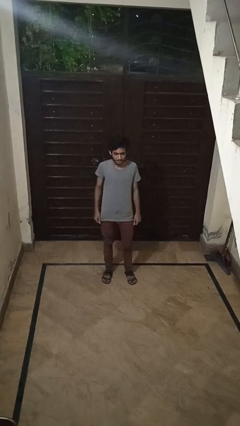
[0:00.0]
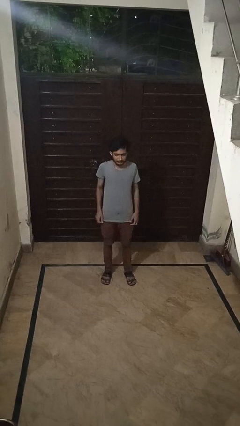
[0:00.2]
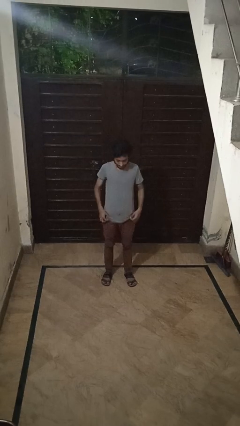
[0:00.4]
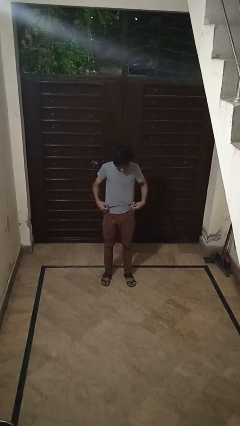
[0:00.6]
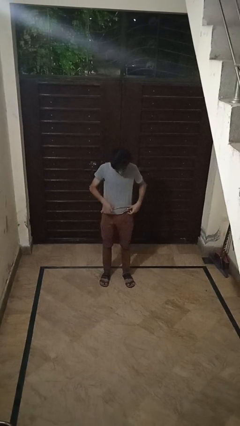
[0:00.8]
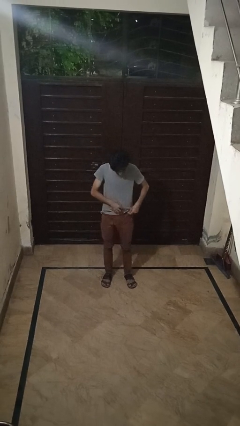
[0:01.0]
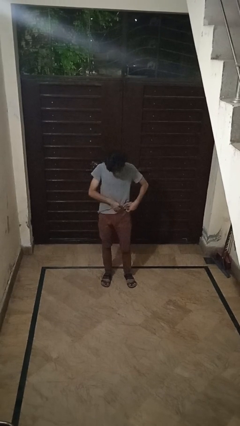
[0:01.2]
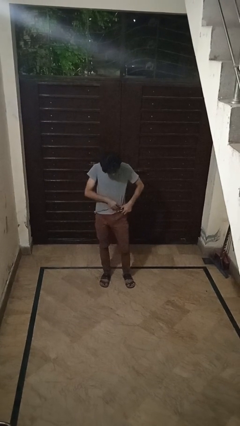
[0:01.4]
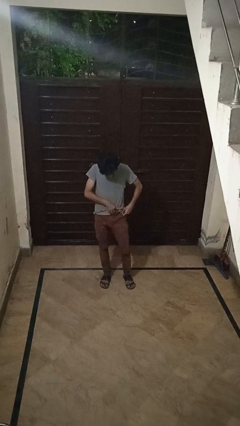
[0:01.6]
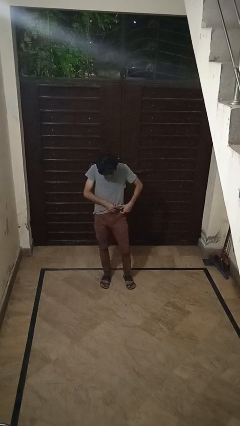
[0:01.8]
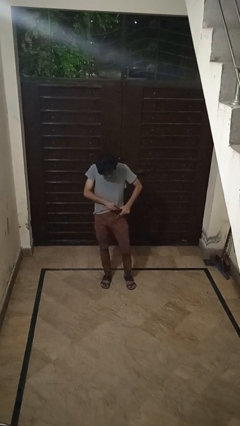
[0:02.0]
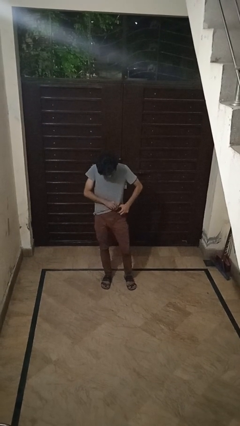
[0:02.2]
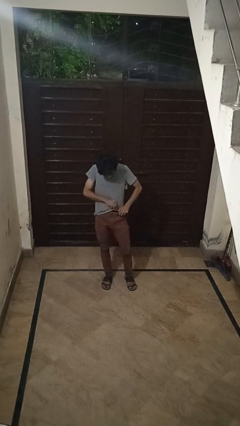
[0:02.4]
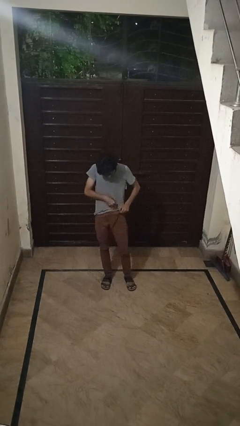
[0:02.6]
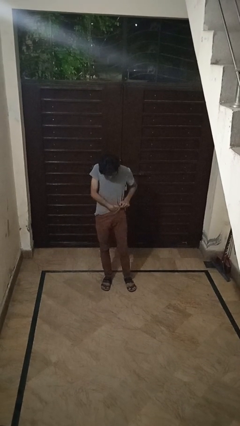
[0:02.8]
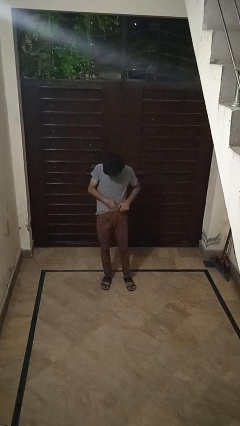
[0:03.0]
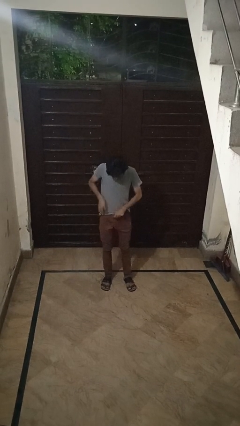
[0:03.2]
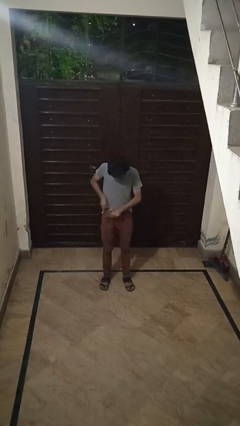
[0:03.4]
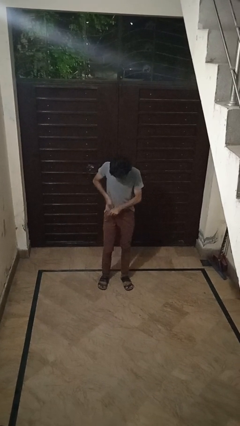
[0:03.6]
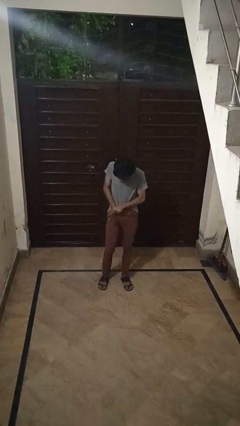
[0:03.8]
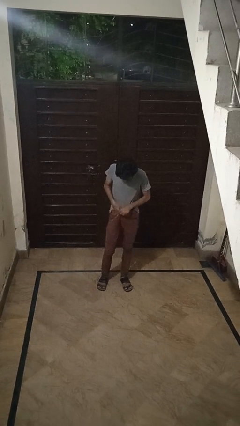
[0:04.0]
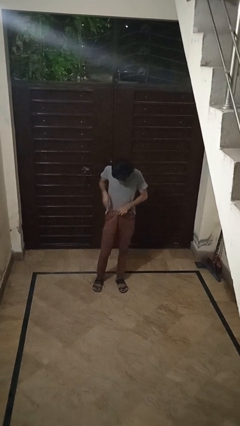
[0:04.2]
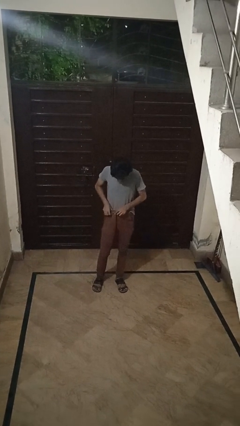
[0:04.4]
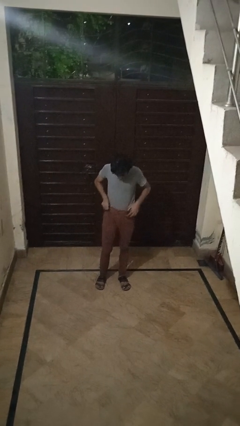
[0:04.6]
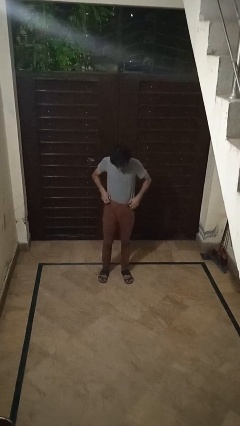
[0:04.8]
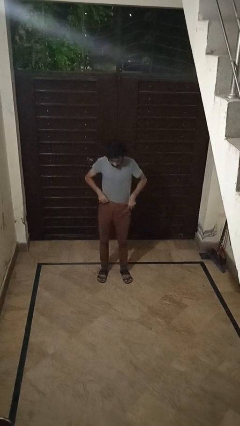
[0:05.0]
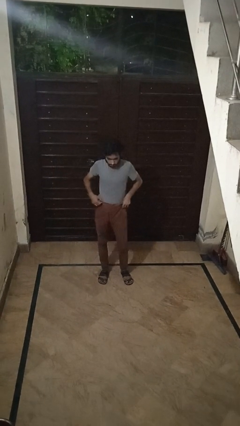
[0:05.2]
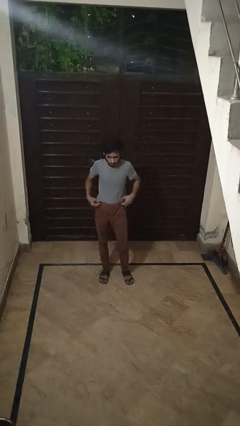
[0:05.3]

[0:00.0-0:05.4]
person tucks in shirt

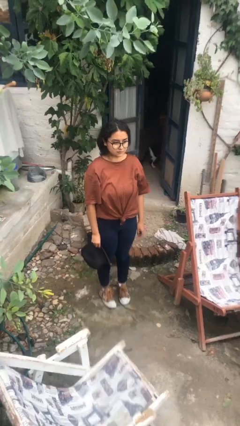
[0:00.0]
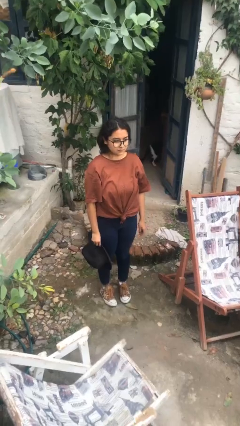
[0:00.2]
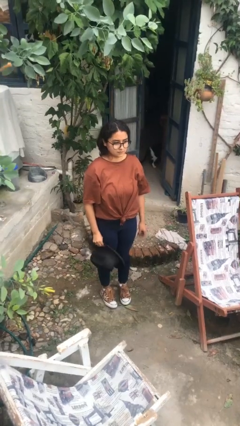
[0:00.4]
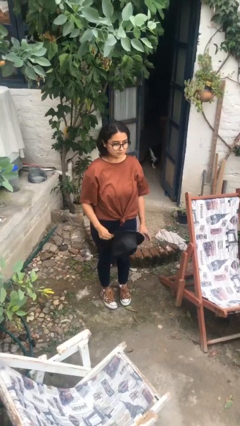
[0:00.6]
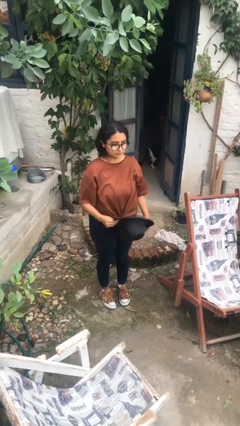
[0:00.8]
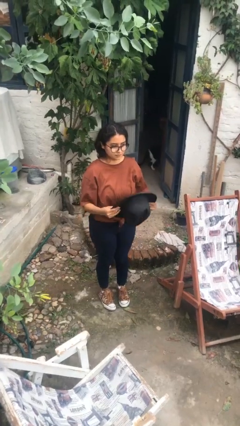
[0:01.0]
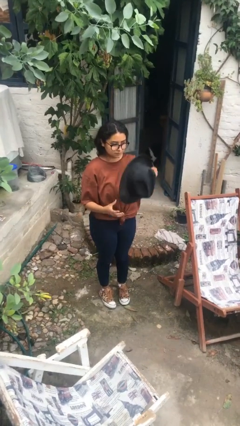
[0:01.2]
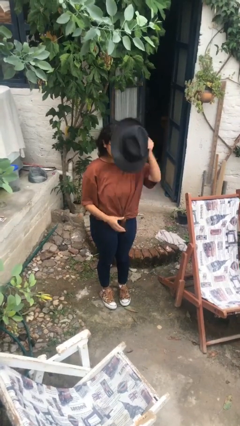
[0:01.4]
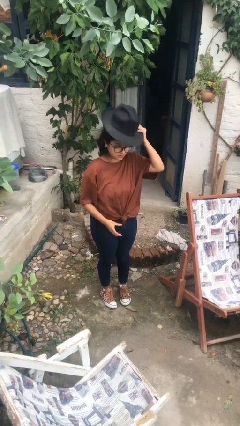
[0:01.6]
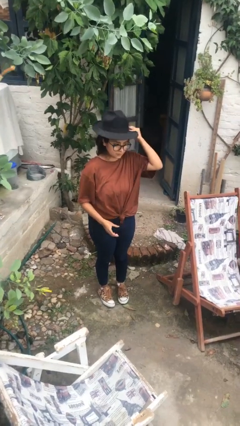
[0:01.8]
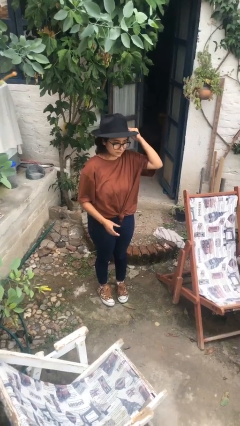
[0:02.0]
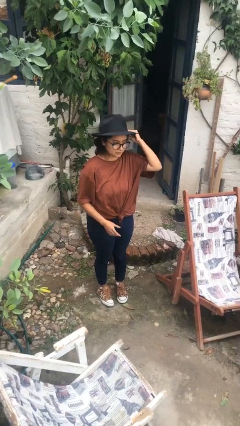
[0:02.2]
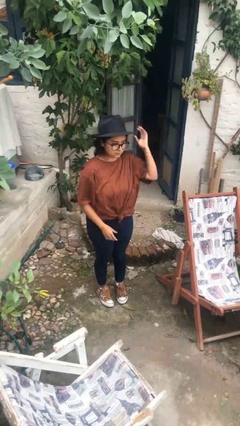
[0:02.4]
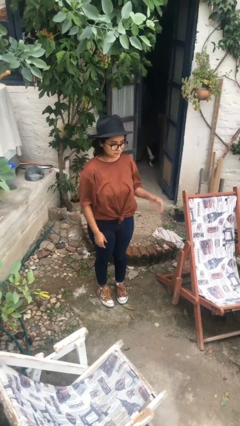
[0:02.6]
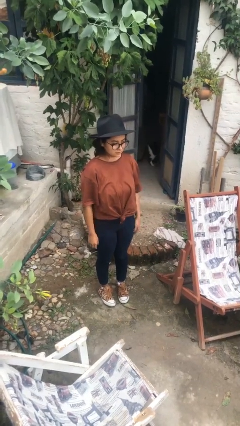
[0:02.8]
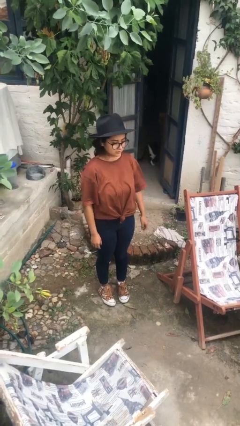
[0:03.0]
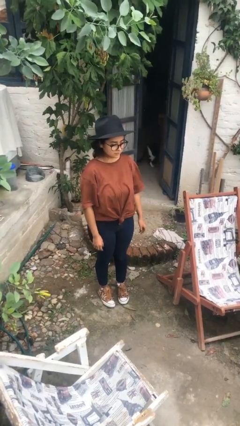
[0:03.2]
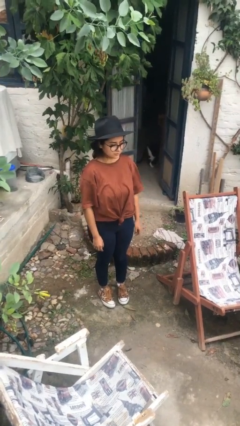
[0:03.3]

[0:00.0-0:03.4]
person puts on hat

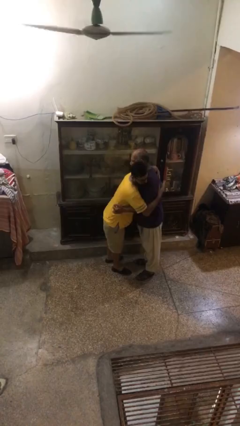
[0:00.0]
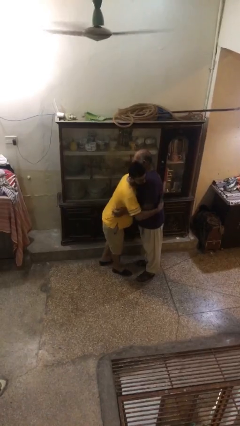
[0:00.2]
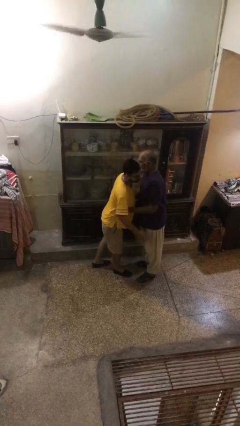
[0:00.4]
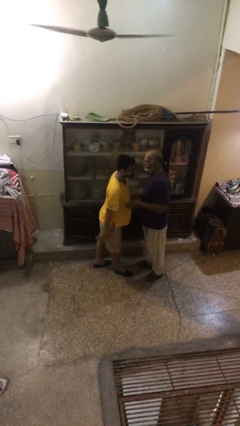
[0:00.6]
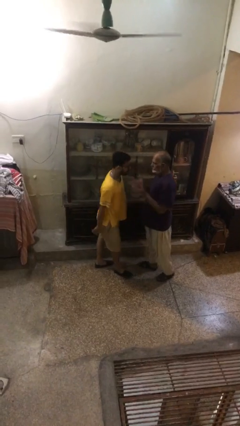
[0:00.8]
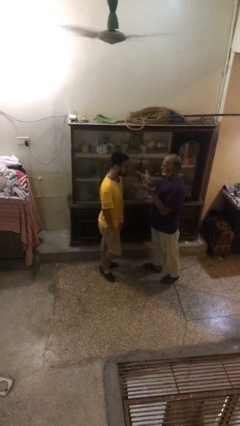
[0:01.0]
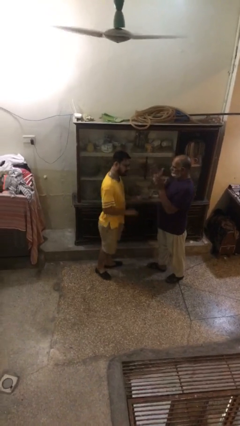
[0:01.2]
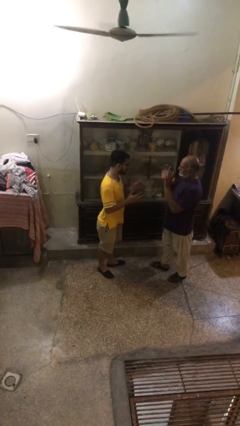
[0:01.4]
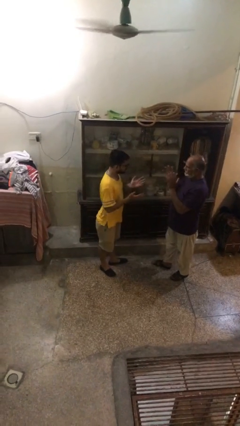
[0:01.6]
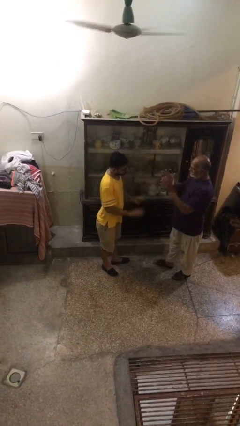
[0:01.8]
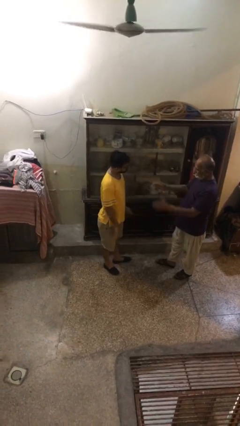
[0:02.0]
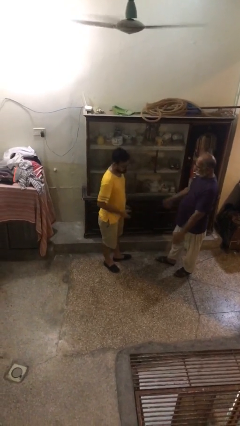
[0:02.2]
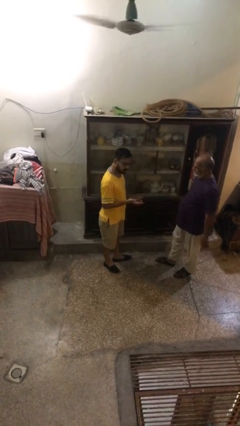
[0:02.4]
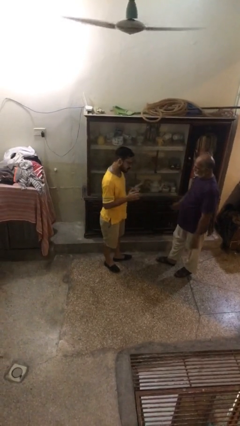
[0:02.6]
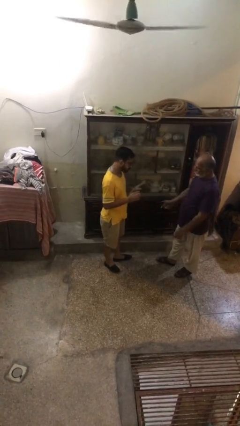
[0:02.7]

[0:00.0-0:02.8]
person talks to person

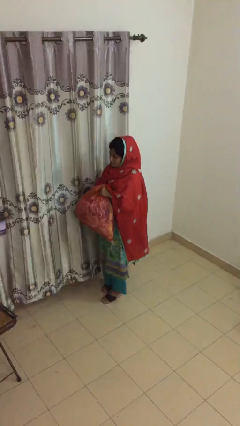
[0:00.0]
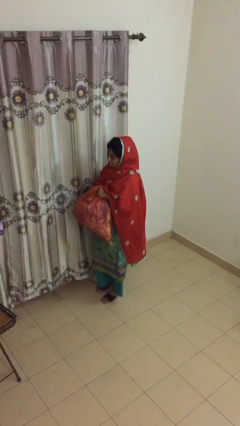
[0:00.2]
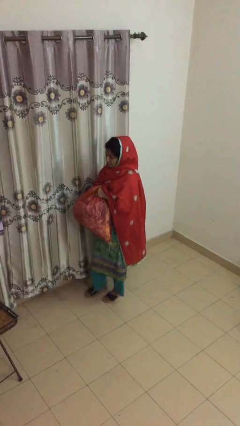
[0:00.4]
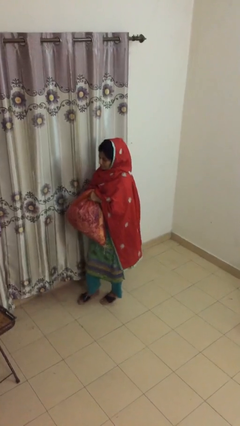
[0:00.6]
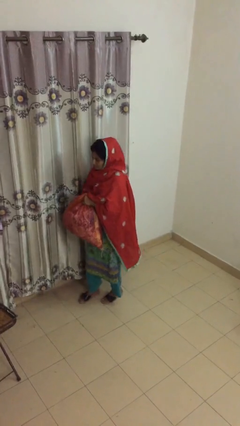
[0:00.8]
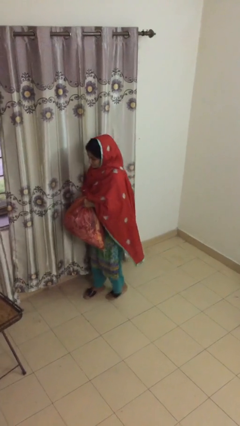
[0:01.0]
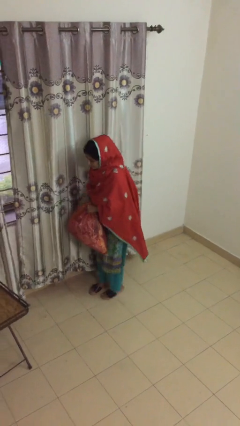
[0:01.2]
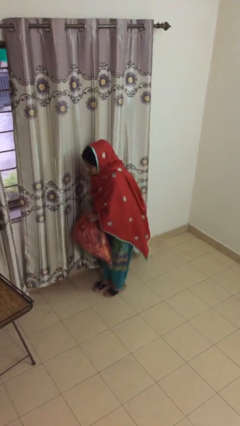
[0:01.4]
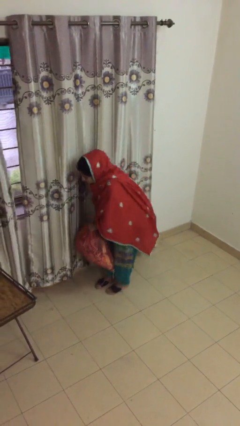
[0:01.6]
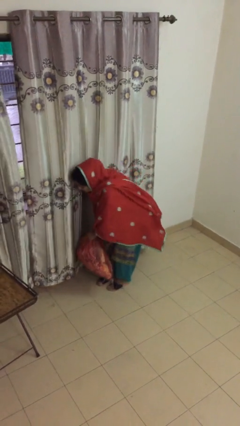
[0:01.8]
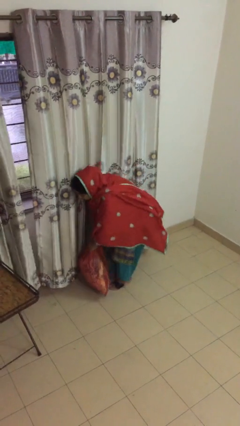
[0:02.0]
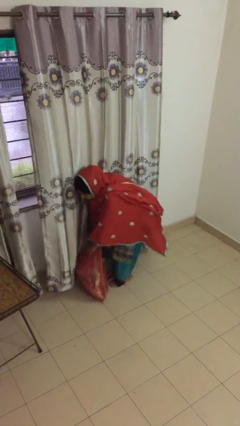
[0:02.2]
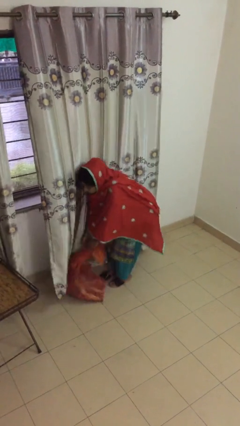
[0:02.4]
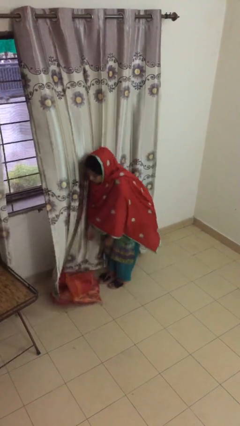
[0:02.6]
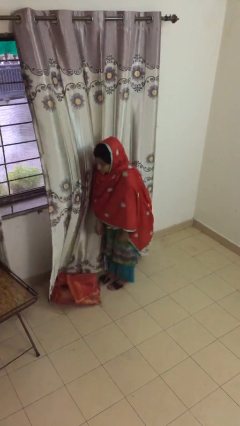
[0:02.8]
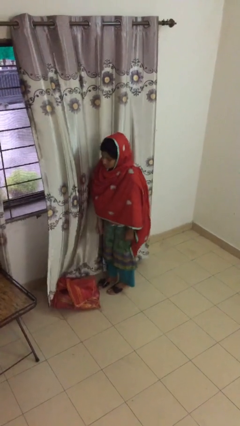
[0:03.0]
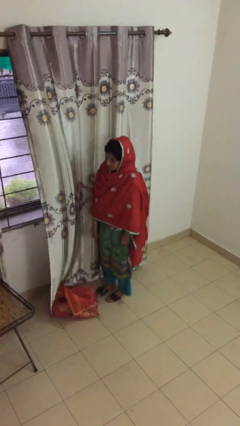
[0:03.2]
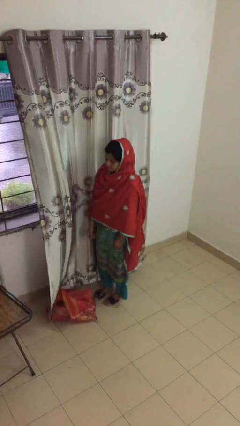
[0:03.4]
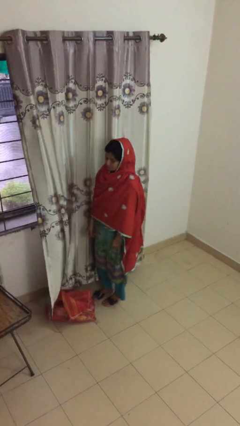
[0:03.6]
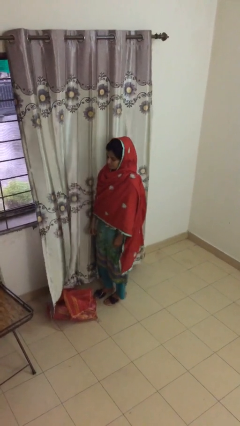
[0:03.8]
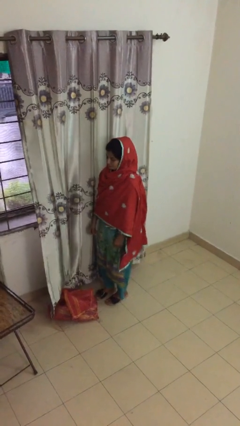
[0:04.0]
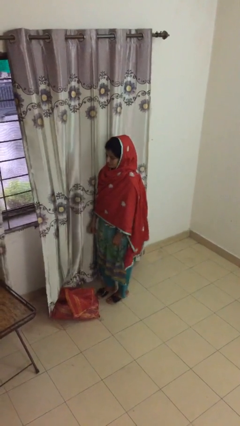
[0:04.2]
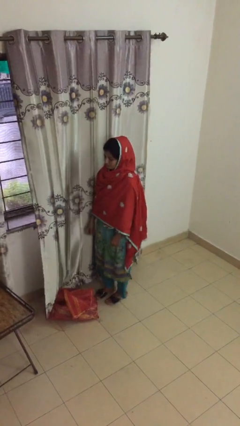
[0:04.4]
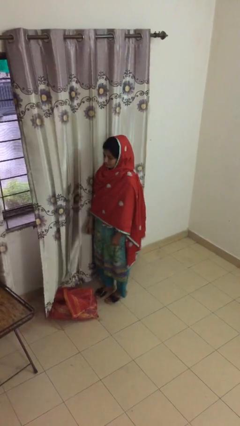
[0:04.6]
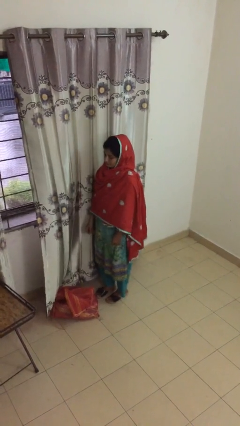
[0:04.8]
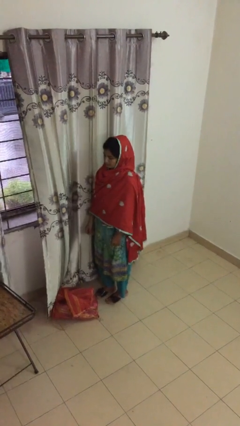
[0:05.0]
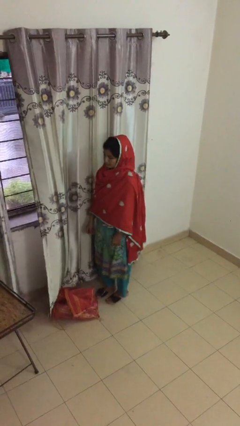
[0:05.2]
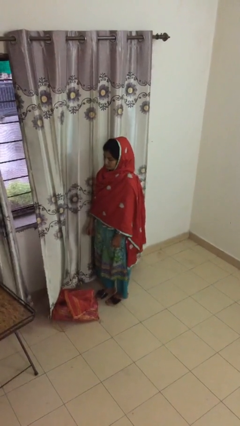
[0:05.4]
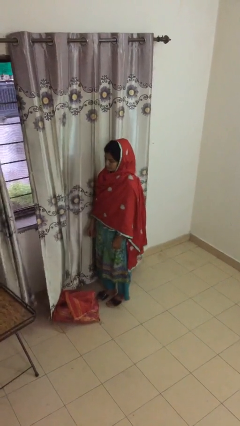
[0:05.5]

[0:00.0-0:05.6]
person puts down object on floor

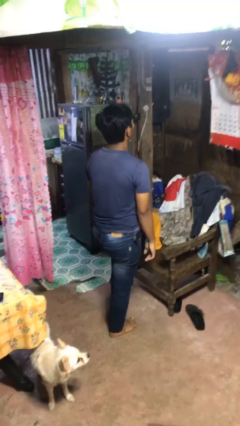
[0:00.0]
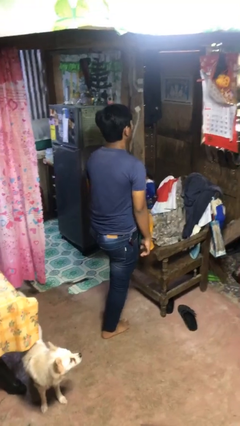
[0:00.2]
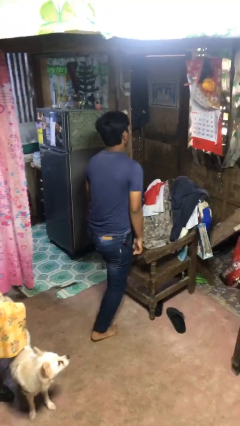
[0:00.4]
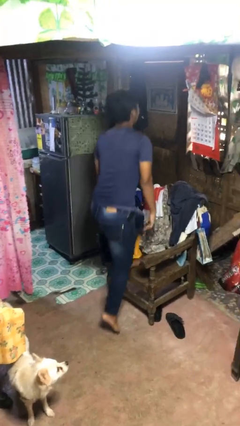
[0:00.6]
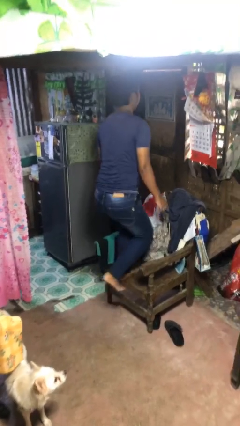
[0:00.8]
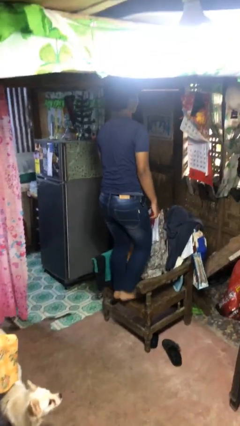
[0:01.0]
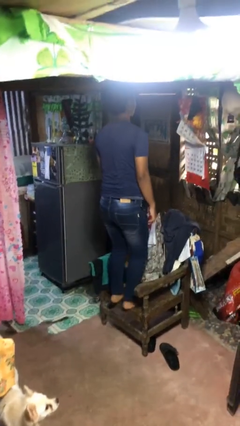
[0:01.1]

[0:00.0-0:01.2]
person climbs on chair
